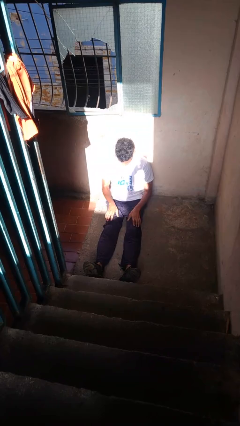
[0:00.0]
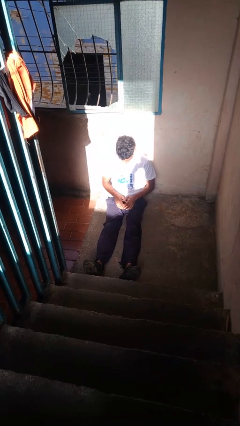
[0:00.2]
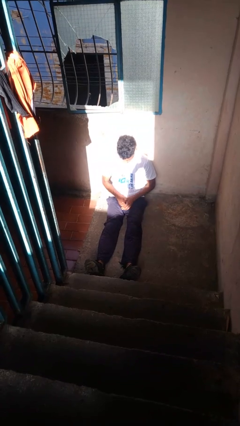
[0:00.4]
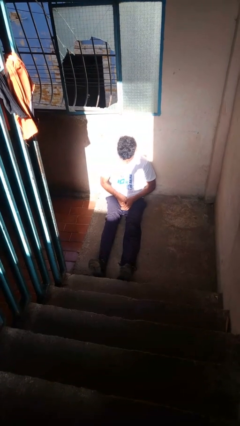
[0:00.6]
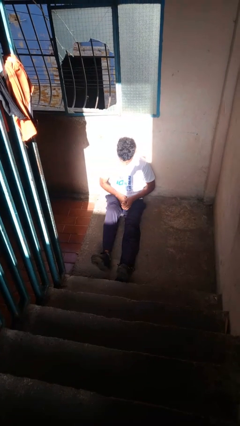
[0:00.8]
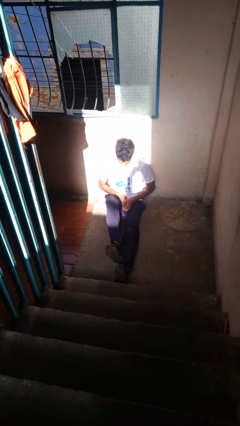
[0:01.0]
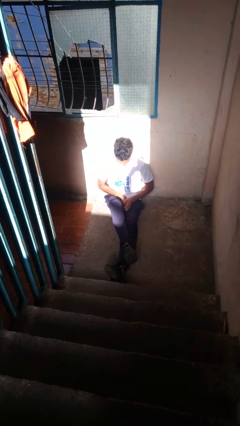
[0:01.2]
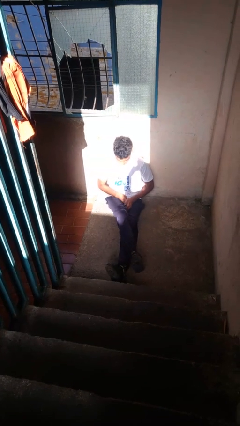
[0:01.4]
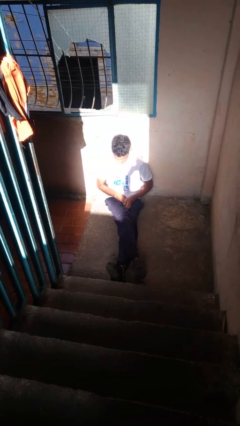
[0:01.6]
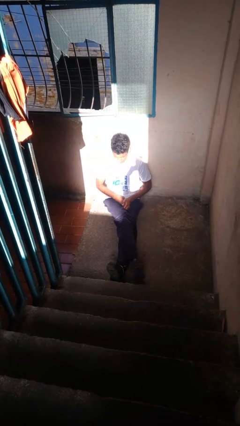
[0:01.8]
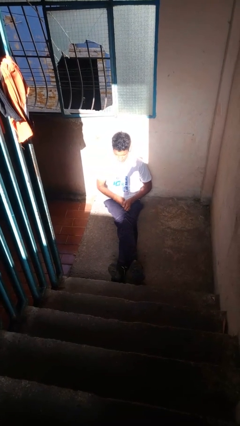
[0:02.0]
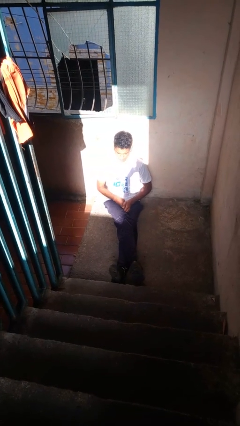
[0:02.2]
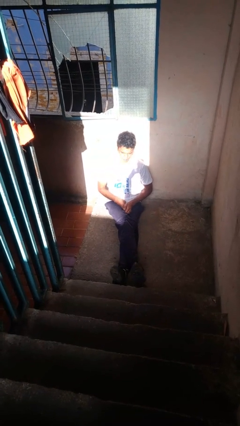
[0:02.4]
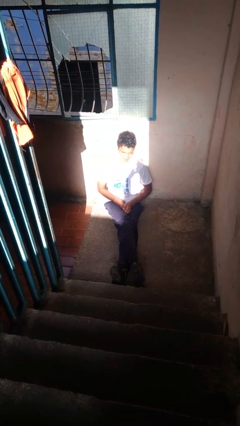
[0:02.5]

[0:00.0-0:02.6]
person crosses legs

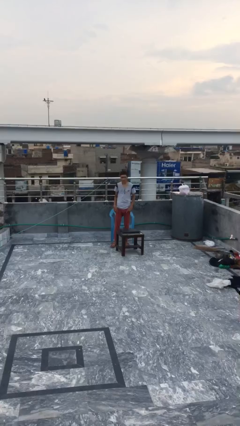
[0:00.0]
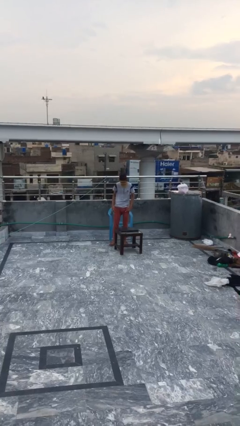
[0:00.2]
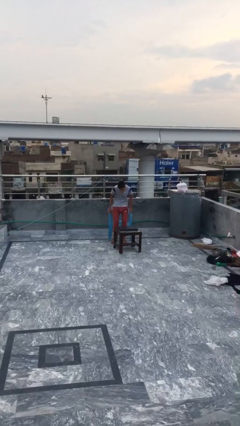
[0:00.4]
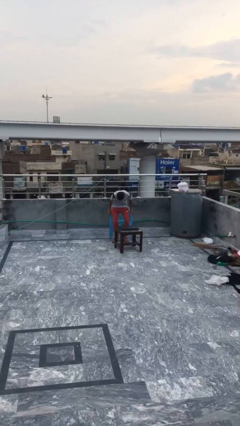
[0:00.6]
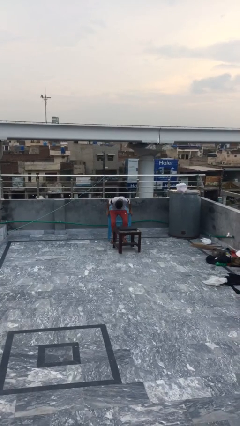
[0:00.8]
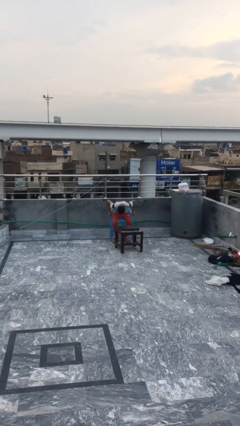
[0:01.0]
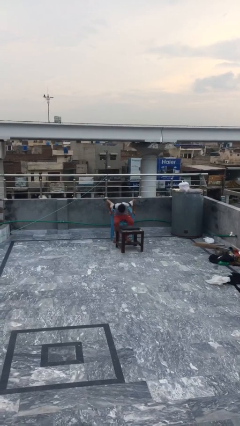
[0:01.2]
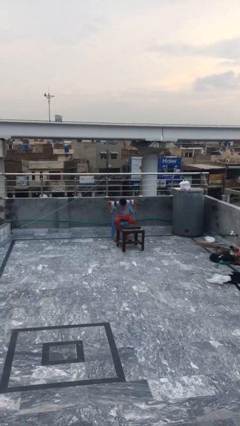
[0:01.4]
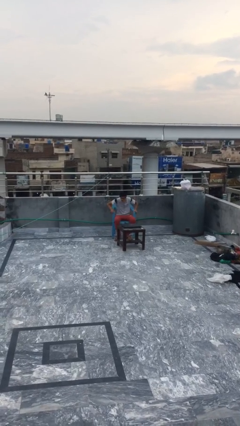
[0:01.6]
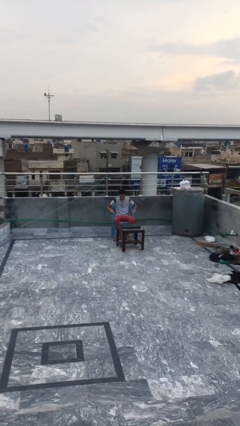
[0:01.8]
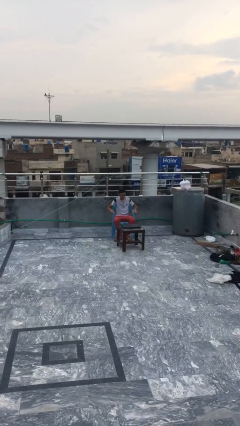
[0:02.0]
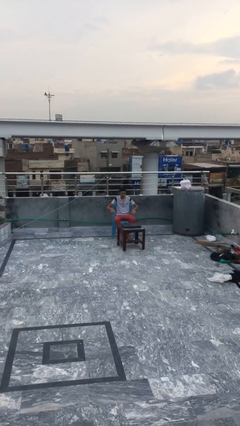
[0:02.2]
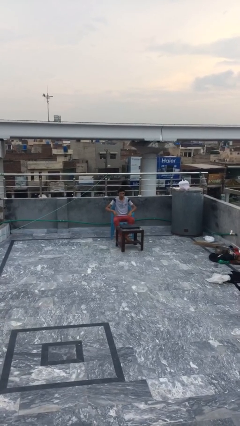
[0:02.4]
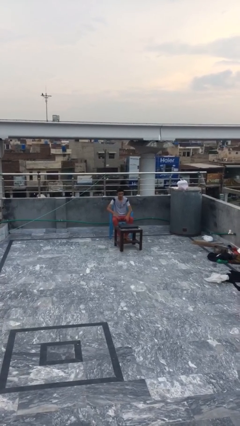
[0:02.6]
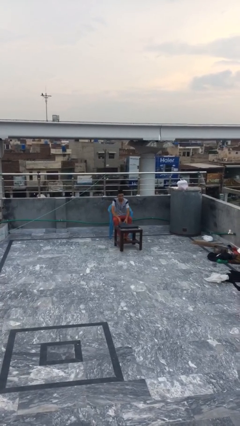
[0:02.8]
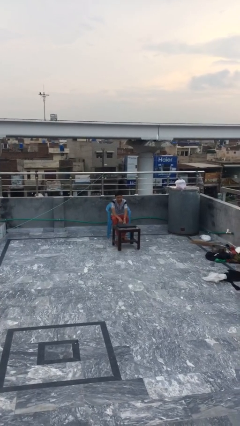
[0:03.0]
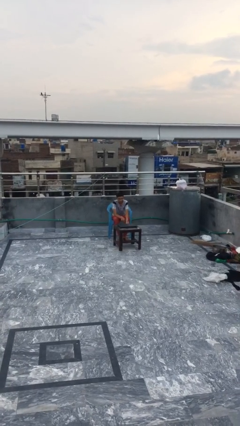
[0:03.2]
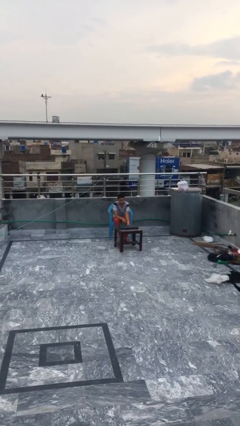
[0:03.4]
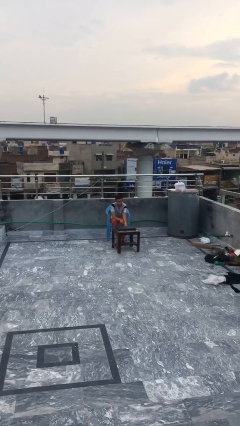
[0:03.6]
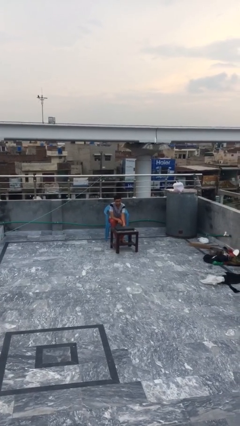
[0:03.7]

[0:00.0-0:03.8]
person sits down

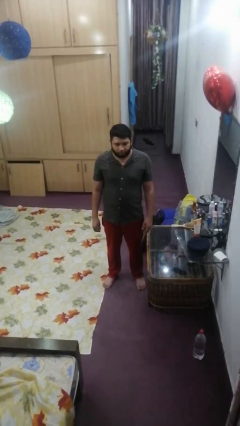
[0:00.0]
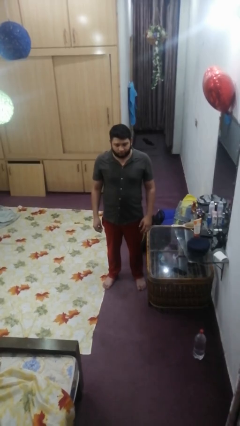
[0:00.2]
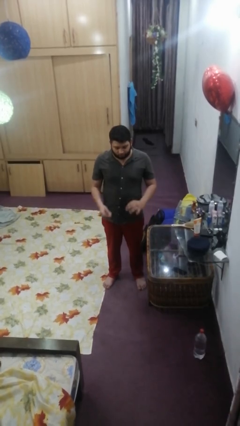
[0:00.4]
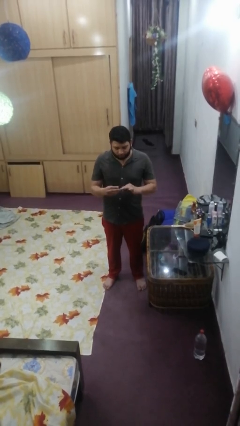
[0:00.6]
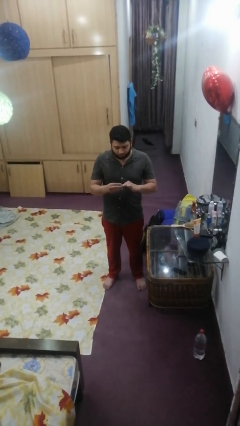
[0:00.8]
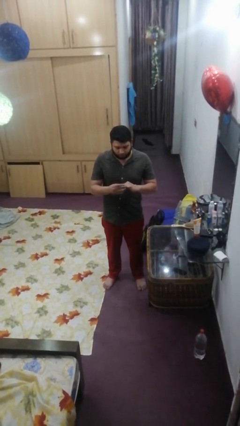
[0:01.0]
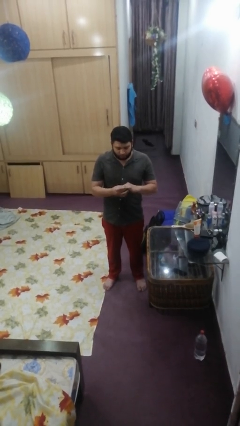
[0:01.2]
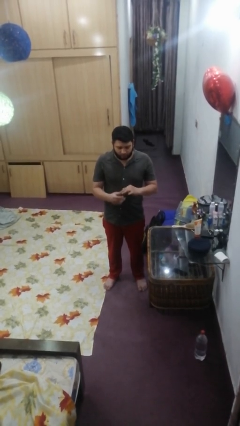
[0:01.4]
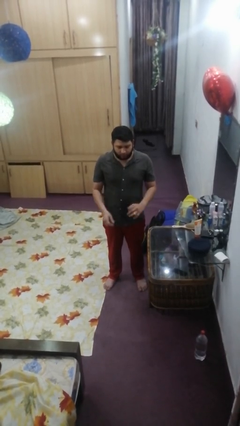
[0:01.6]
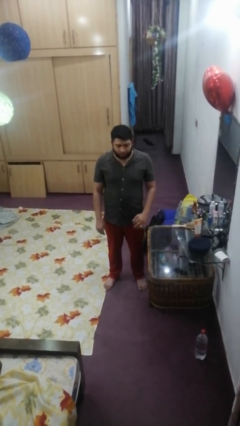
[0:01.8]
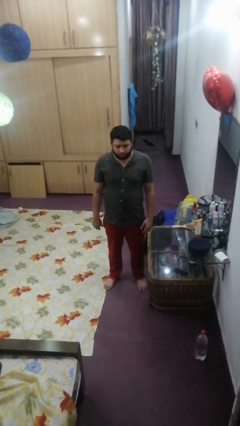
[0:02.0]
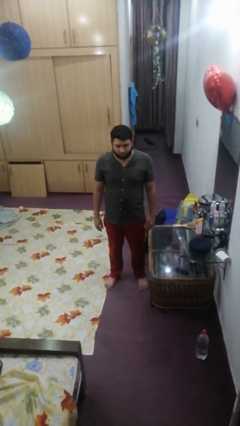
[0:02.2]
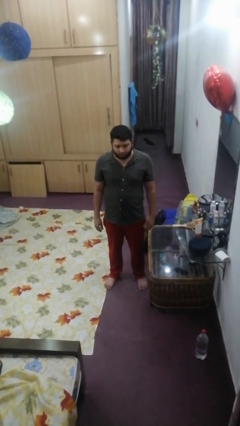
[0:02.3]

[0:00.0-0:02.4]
person puts on ring

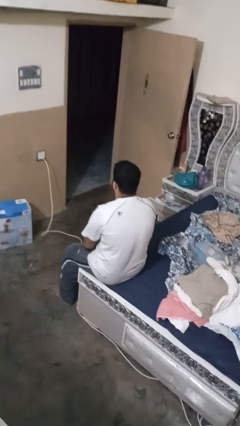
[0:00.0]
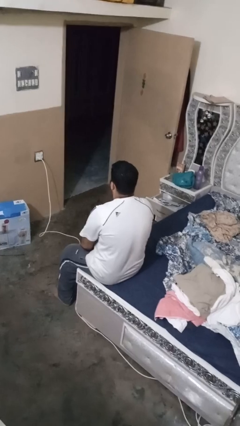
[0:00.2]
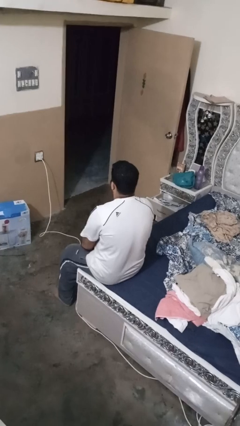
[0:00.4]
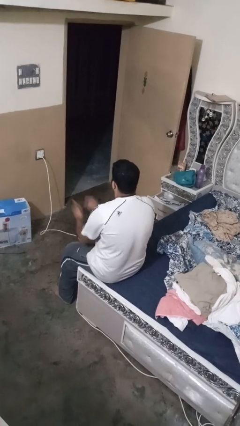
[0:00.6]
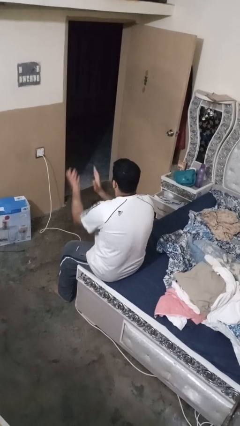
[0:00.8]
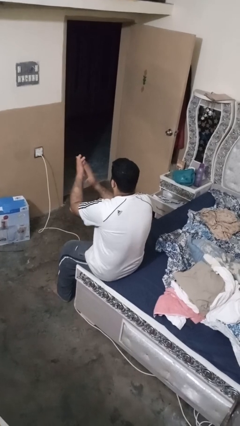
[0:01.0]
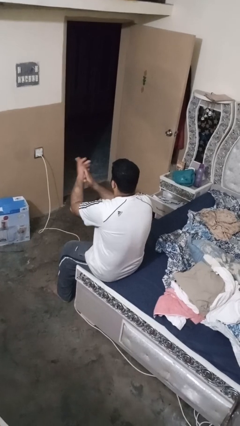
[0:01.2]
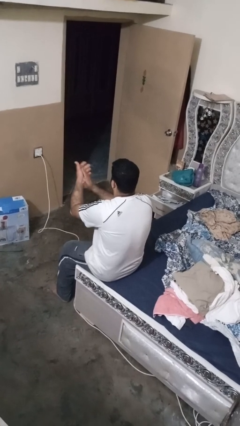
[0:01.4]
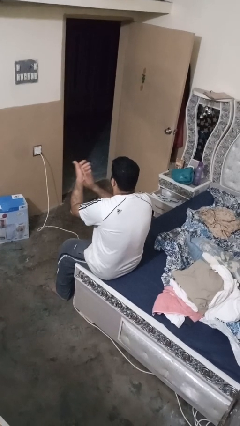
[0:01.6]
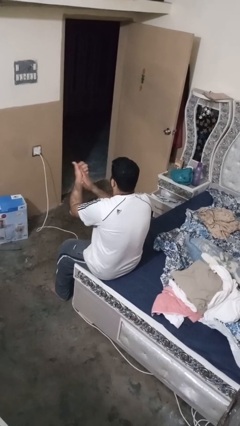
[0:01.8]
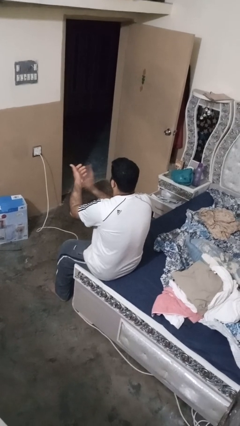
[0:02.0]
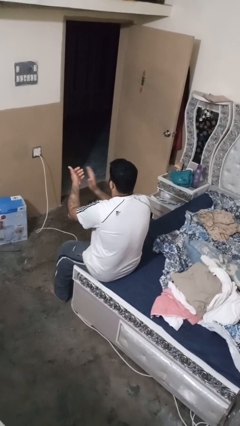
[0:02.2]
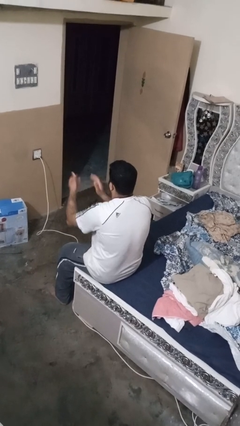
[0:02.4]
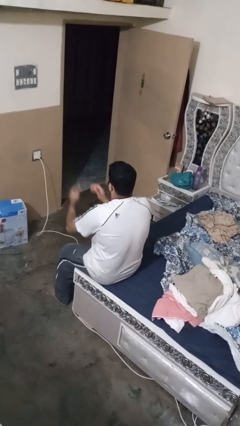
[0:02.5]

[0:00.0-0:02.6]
person claps hands

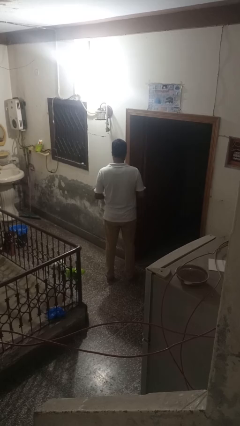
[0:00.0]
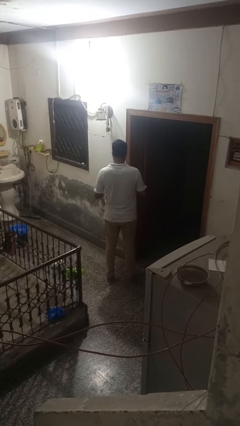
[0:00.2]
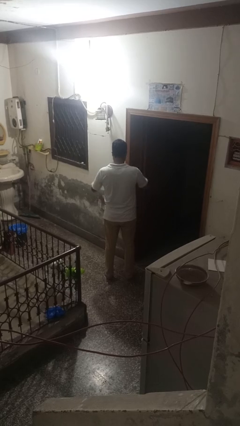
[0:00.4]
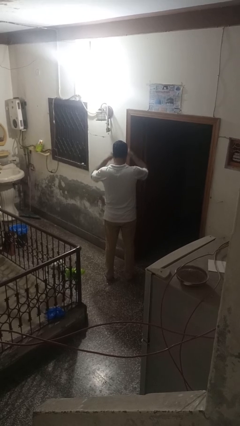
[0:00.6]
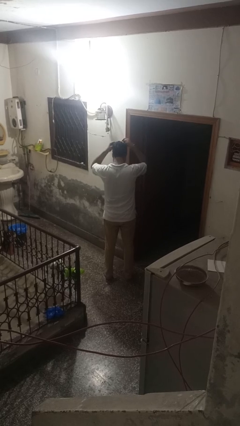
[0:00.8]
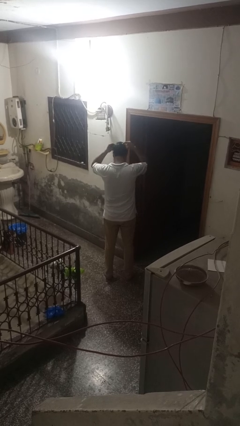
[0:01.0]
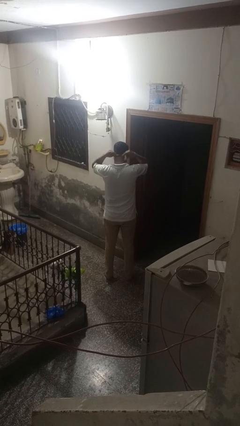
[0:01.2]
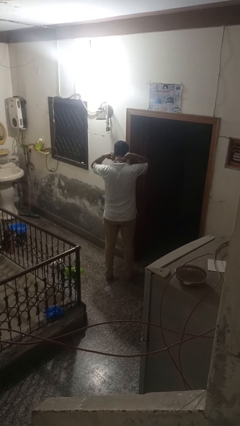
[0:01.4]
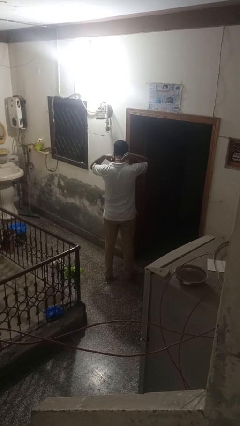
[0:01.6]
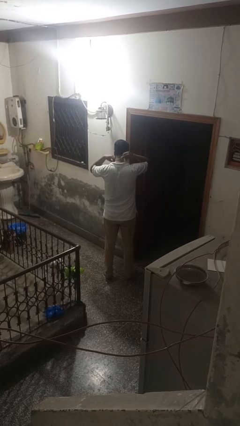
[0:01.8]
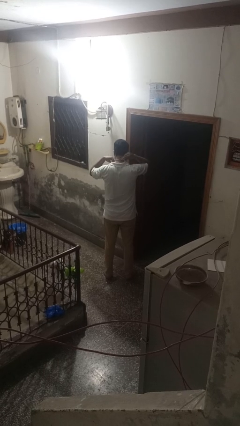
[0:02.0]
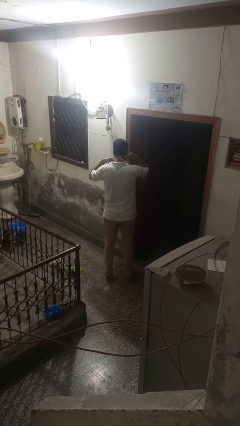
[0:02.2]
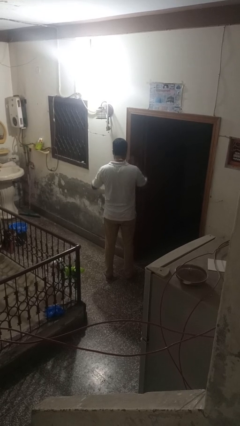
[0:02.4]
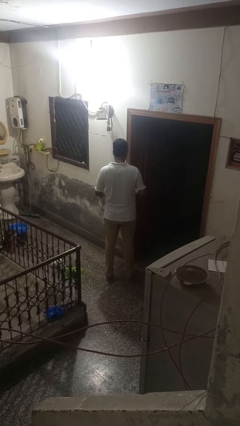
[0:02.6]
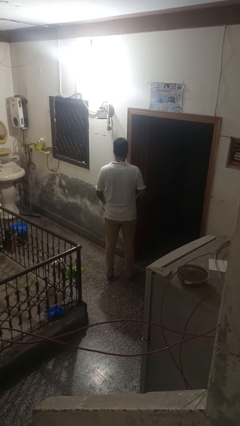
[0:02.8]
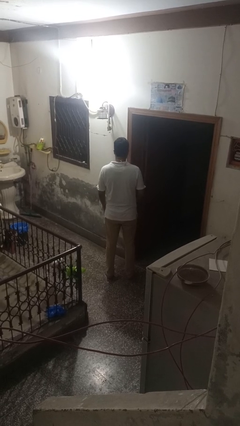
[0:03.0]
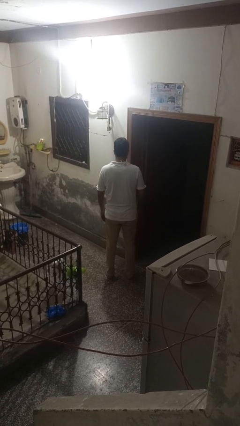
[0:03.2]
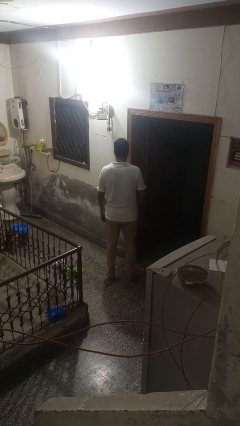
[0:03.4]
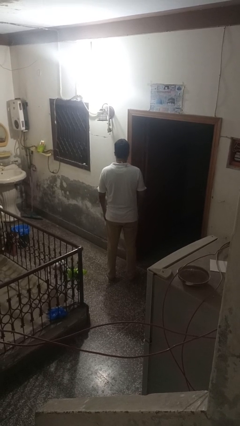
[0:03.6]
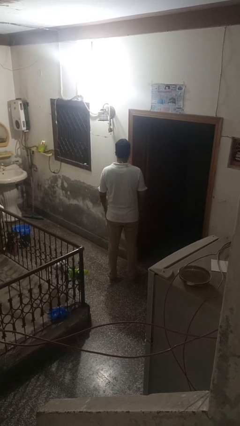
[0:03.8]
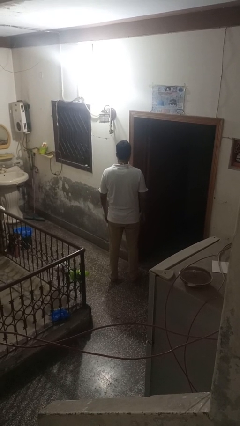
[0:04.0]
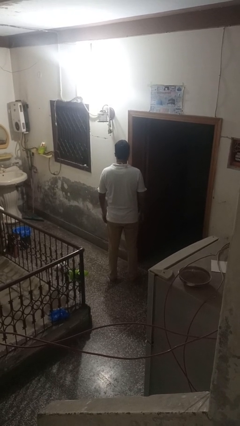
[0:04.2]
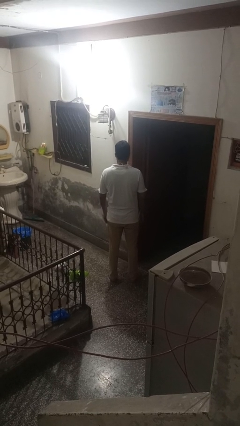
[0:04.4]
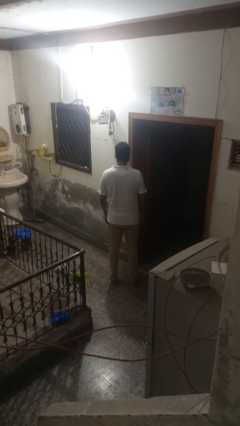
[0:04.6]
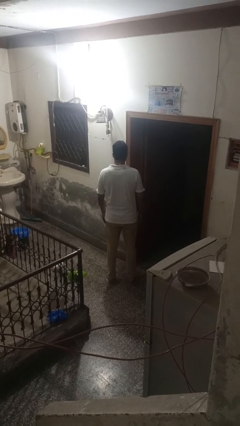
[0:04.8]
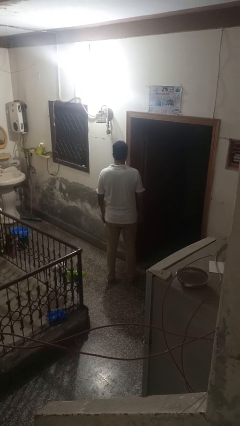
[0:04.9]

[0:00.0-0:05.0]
person puts on necklace

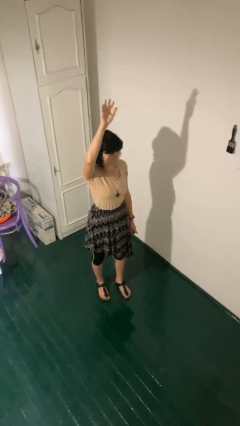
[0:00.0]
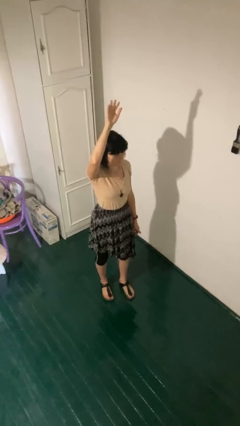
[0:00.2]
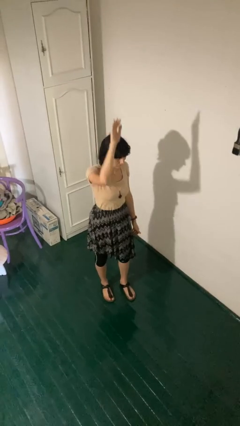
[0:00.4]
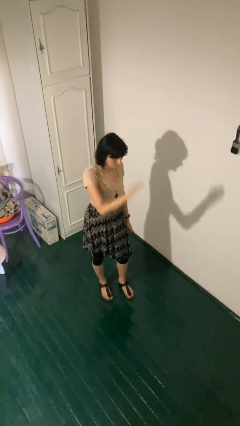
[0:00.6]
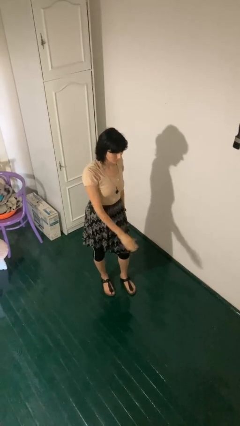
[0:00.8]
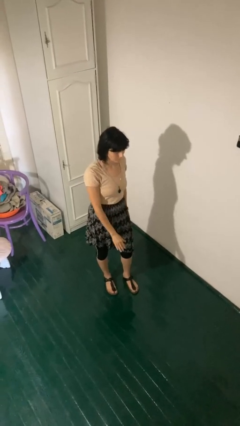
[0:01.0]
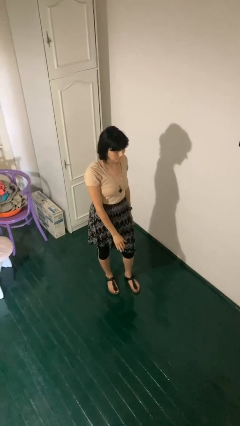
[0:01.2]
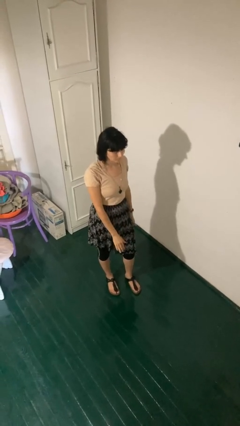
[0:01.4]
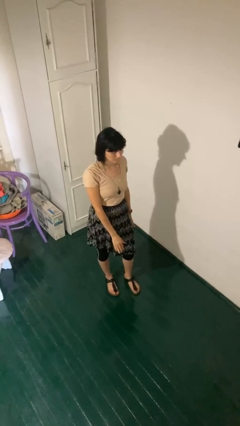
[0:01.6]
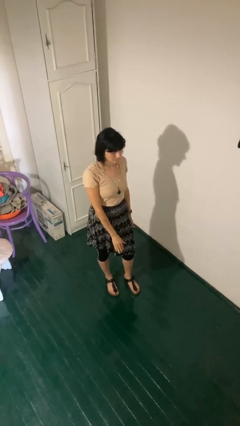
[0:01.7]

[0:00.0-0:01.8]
person gestures swipe down
